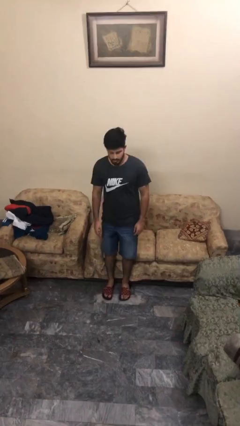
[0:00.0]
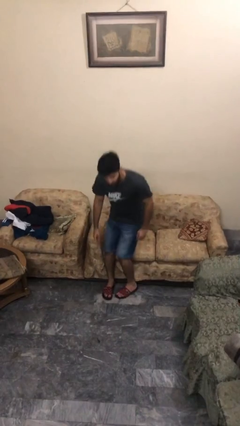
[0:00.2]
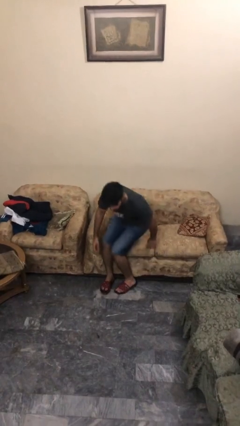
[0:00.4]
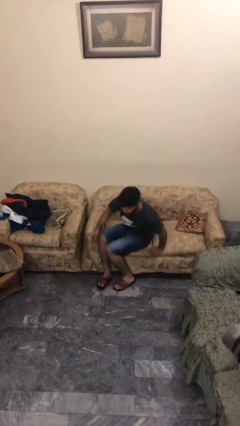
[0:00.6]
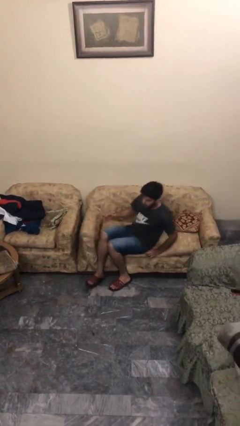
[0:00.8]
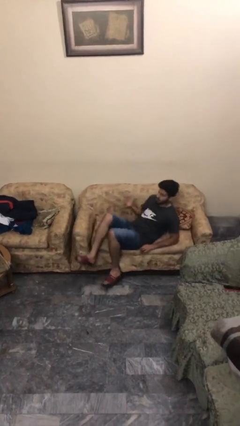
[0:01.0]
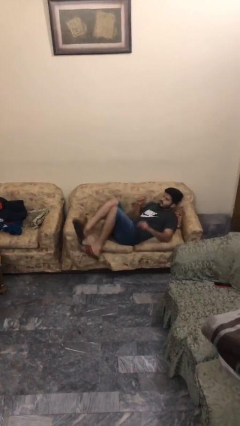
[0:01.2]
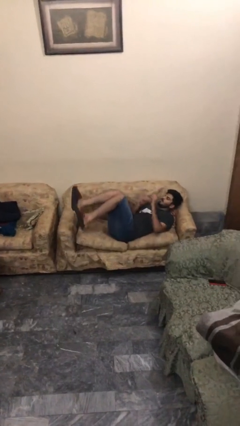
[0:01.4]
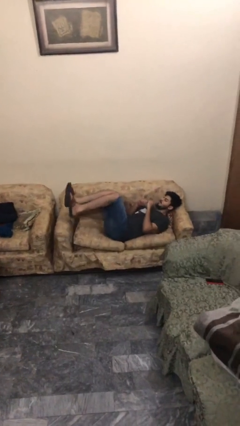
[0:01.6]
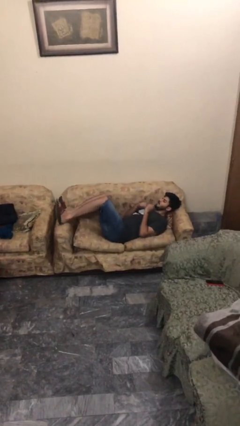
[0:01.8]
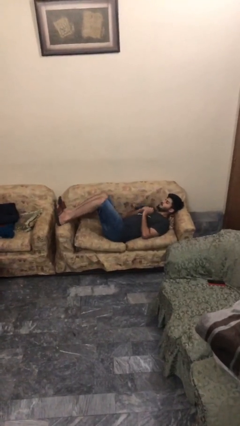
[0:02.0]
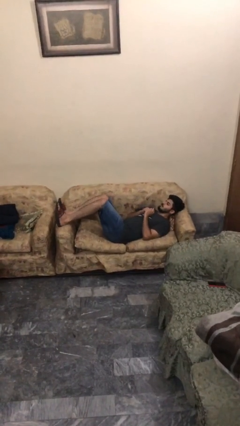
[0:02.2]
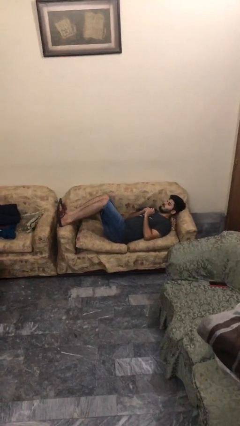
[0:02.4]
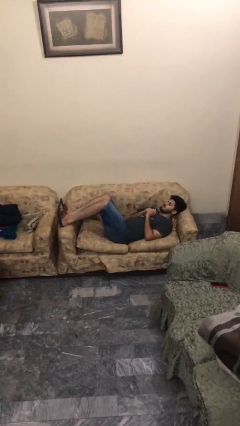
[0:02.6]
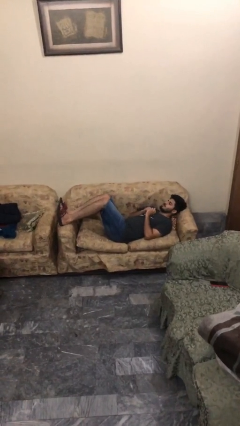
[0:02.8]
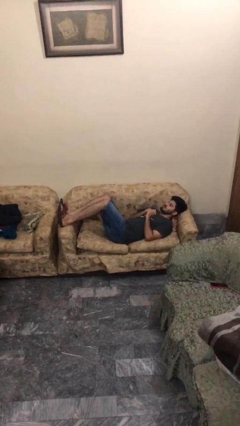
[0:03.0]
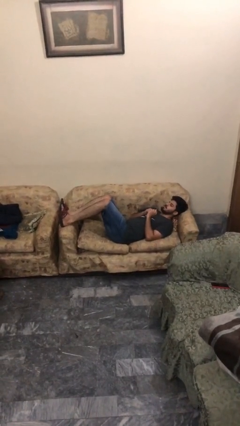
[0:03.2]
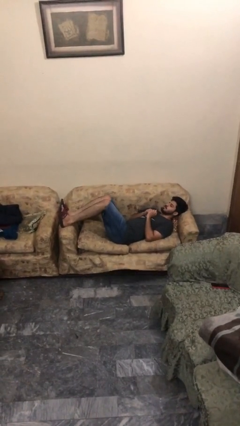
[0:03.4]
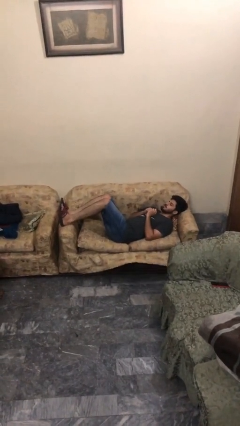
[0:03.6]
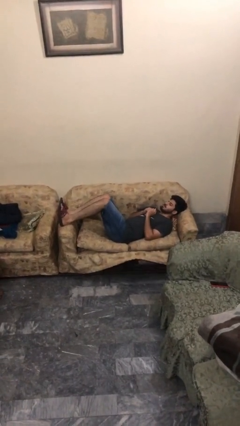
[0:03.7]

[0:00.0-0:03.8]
person lies down on couch

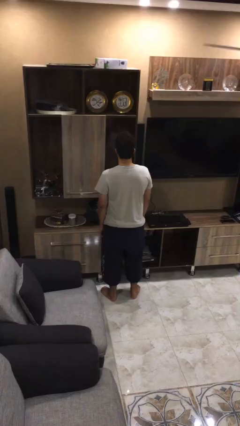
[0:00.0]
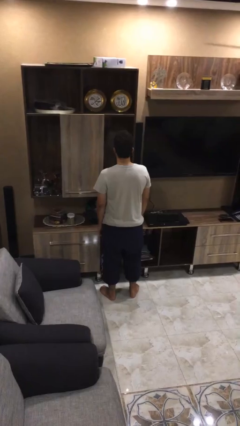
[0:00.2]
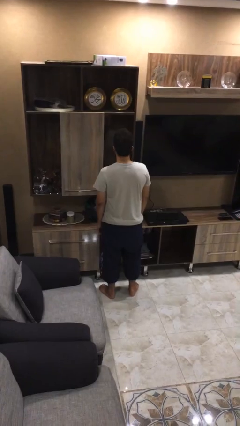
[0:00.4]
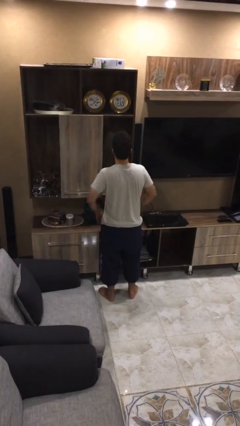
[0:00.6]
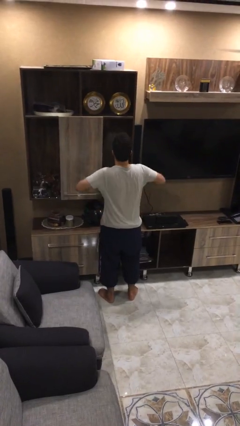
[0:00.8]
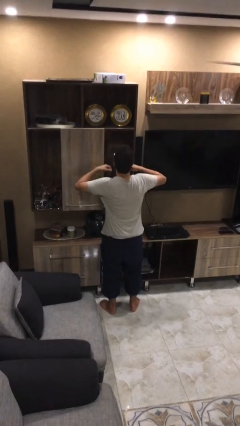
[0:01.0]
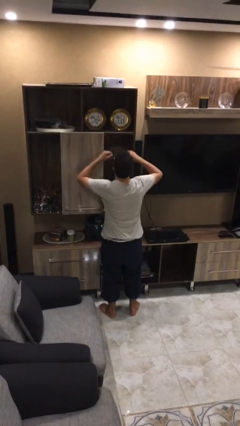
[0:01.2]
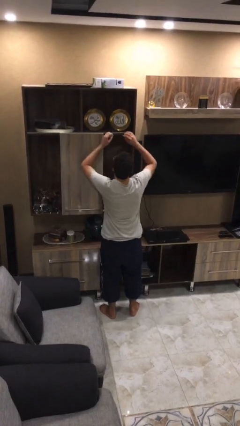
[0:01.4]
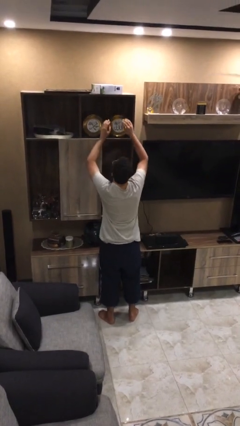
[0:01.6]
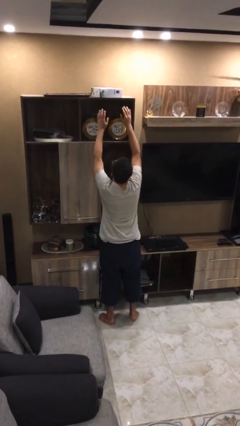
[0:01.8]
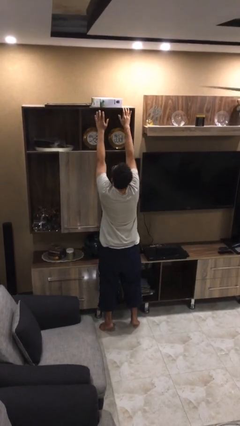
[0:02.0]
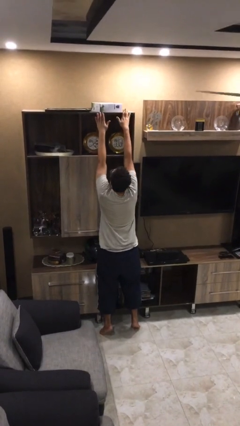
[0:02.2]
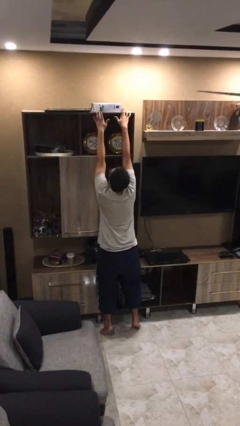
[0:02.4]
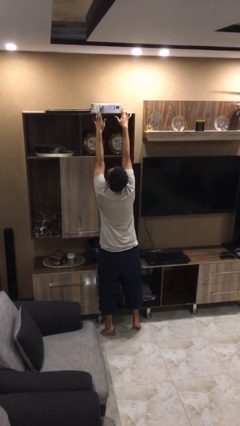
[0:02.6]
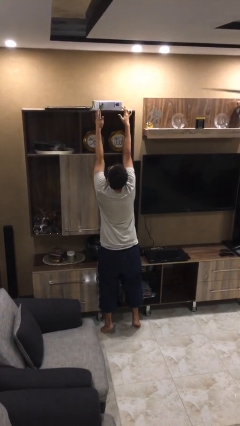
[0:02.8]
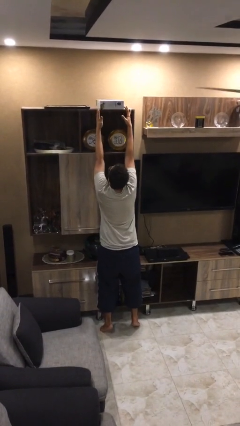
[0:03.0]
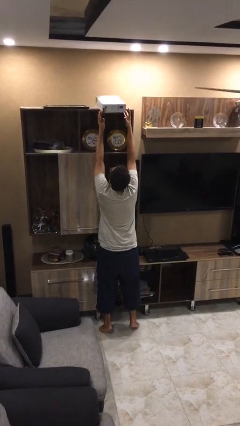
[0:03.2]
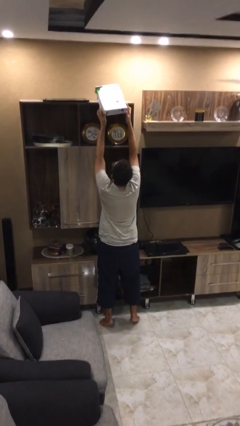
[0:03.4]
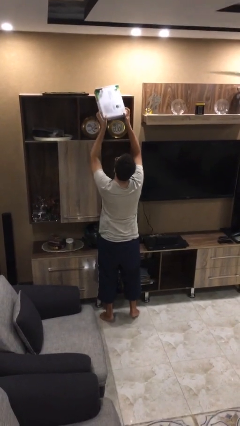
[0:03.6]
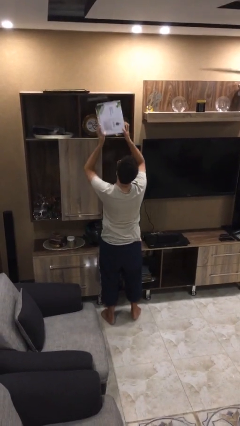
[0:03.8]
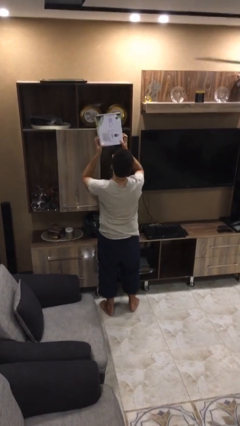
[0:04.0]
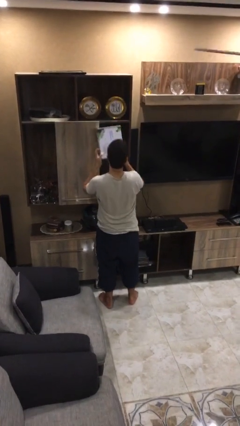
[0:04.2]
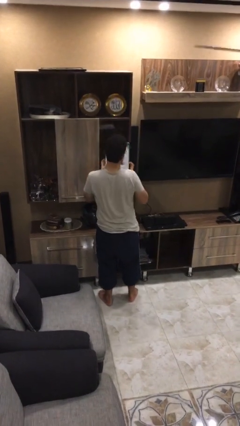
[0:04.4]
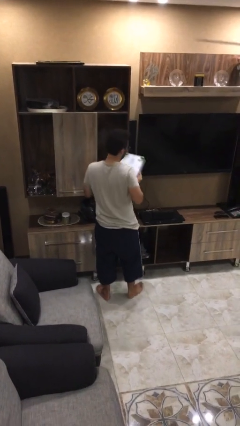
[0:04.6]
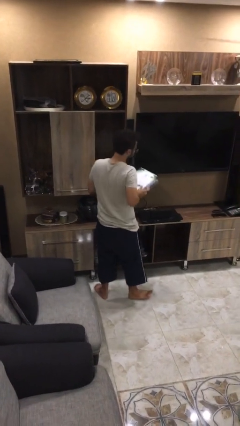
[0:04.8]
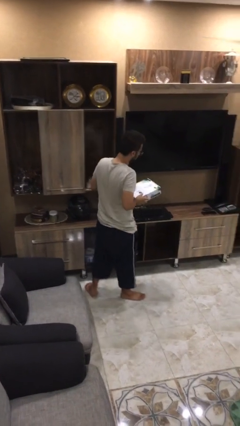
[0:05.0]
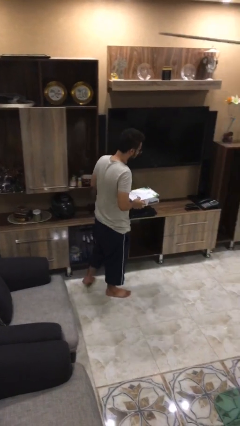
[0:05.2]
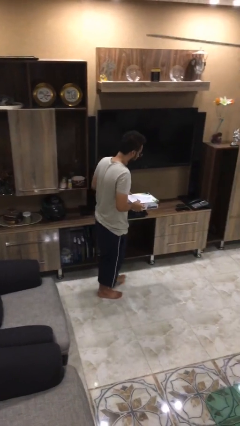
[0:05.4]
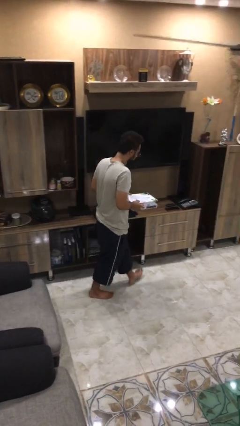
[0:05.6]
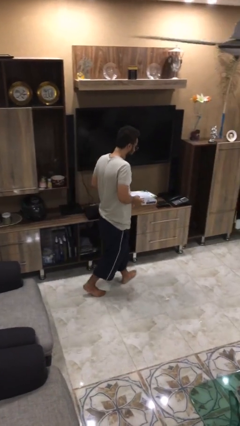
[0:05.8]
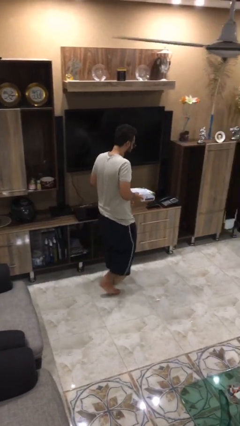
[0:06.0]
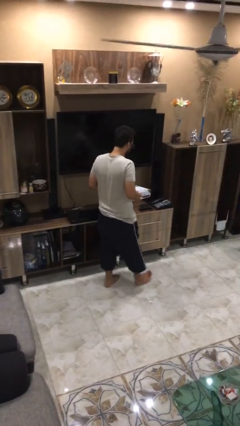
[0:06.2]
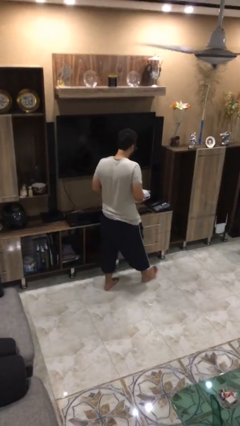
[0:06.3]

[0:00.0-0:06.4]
person picks up object from shelf

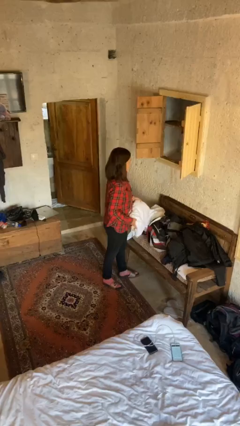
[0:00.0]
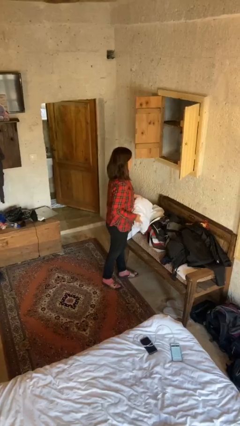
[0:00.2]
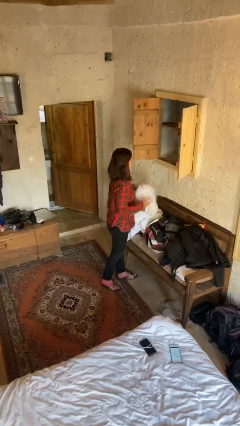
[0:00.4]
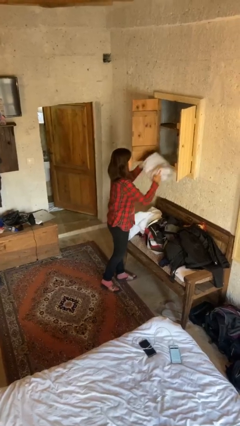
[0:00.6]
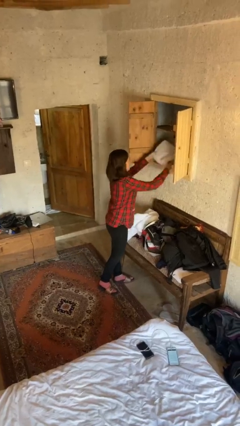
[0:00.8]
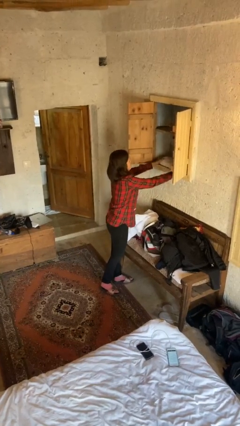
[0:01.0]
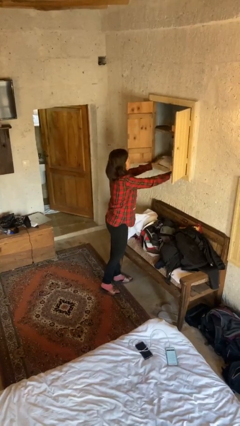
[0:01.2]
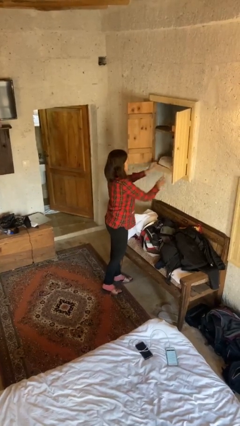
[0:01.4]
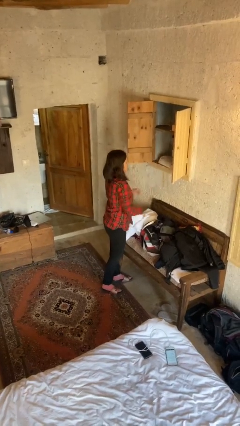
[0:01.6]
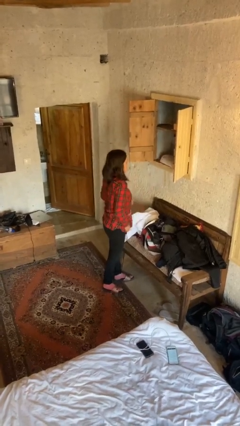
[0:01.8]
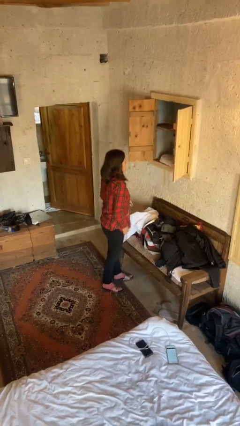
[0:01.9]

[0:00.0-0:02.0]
person puts clothes into dresser

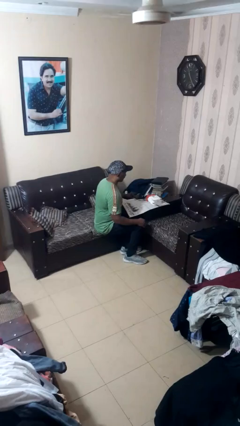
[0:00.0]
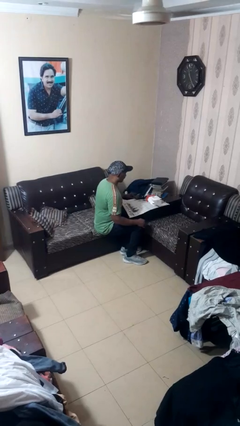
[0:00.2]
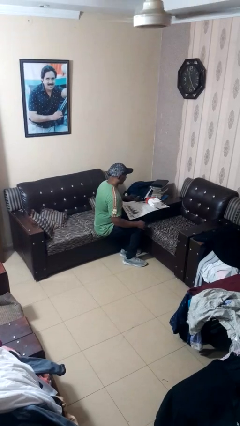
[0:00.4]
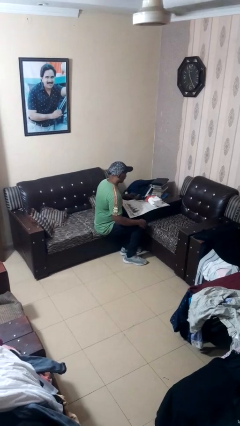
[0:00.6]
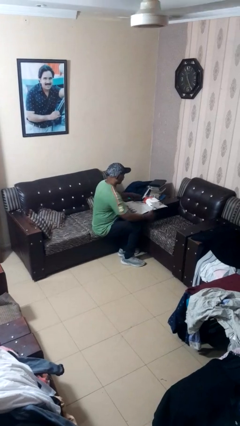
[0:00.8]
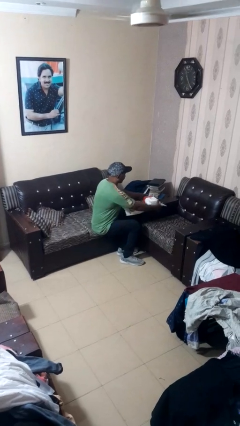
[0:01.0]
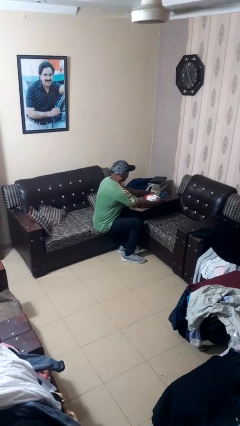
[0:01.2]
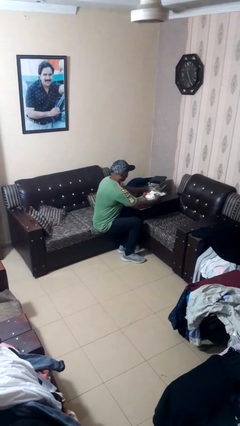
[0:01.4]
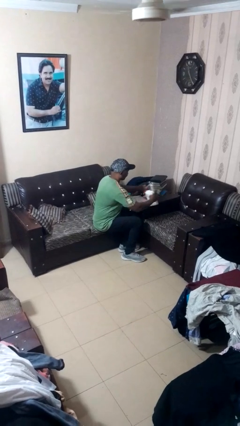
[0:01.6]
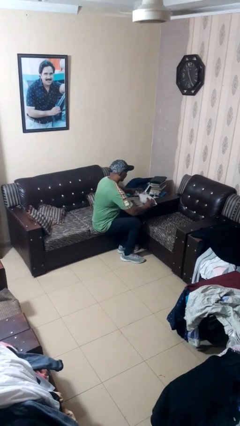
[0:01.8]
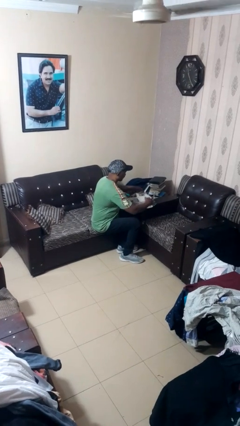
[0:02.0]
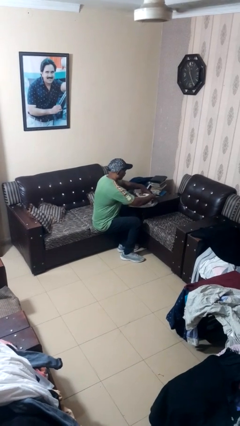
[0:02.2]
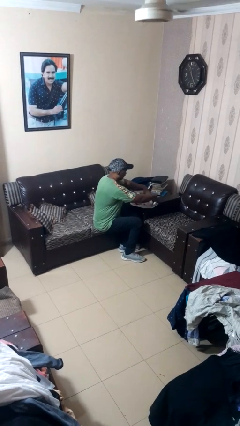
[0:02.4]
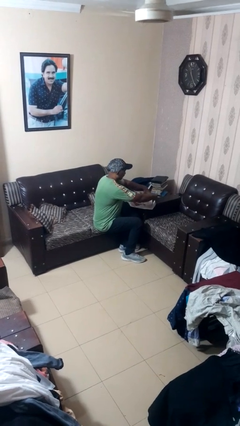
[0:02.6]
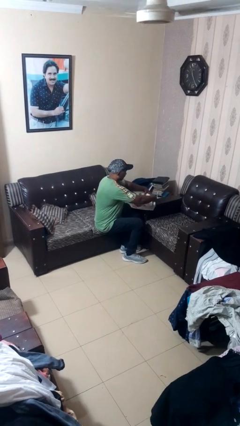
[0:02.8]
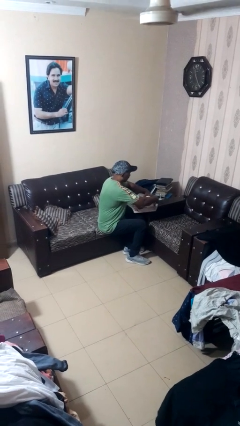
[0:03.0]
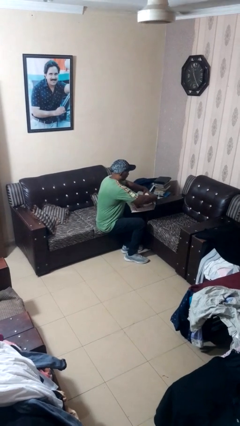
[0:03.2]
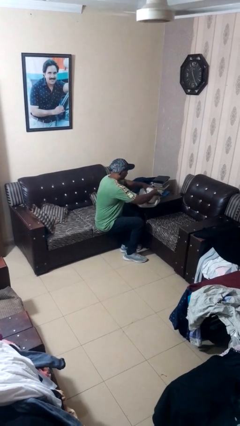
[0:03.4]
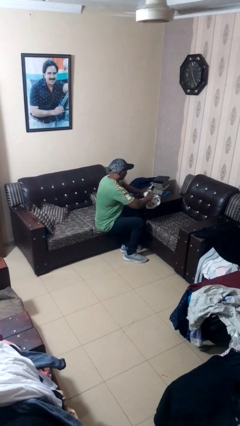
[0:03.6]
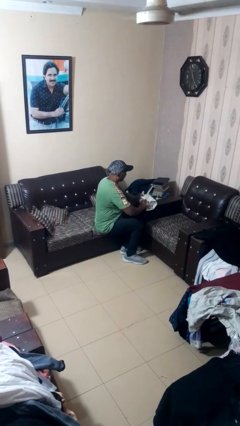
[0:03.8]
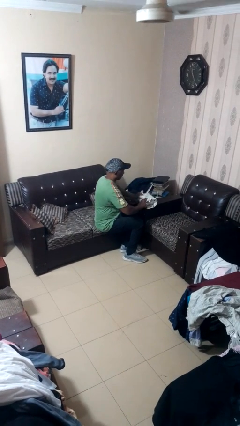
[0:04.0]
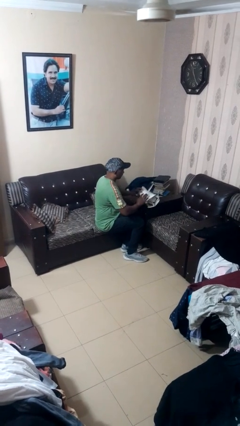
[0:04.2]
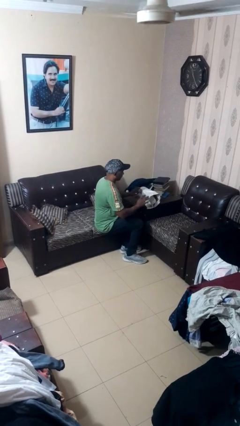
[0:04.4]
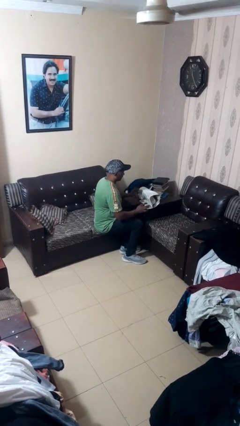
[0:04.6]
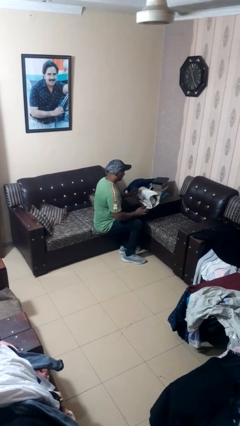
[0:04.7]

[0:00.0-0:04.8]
person wraps box

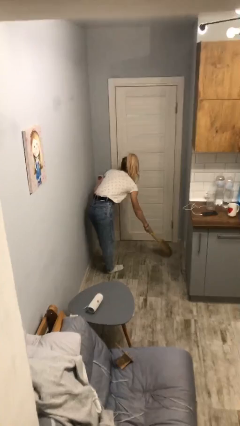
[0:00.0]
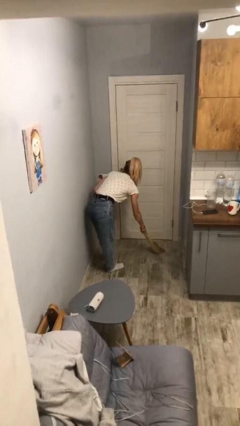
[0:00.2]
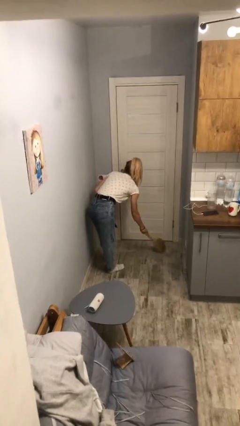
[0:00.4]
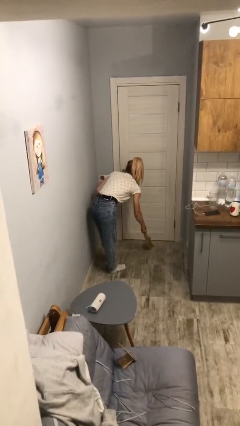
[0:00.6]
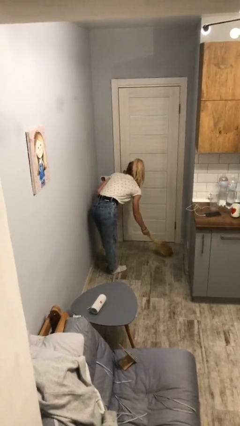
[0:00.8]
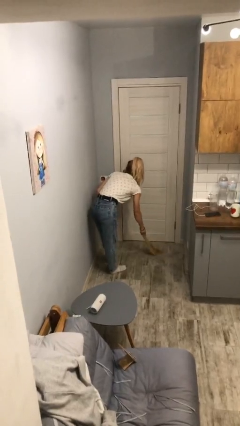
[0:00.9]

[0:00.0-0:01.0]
person sweeps floor
